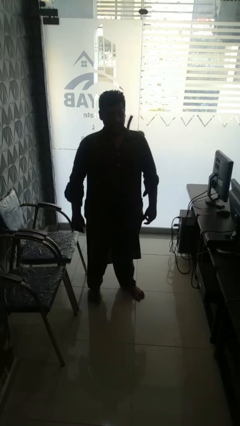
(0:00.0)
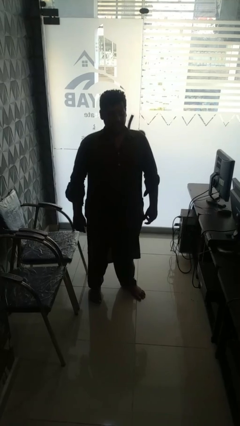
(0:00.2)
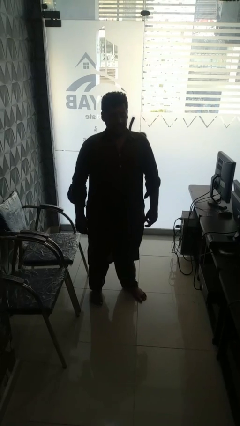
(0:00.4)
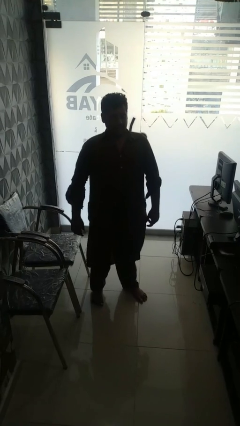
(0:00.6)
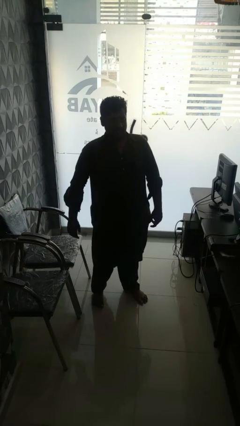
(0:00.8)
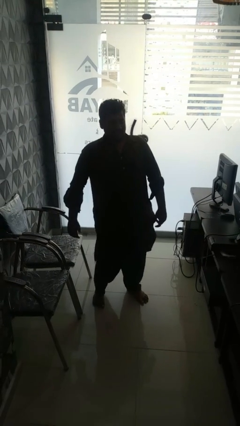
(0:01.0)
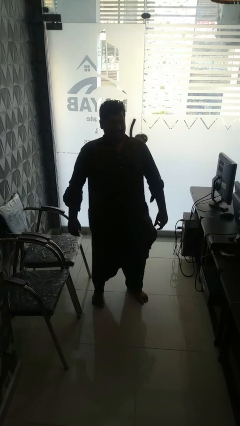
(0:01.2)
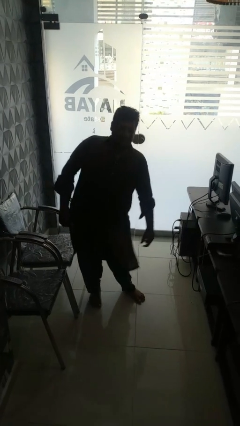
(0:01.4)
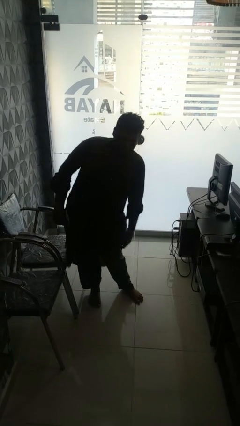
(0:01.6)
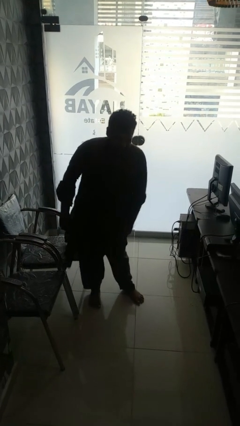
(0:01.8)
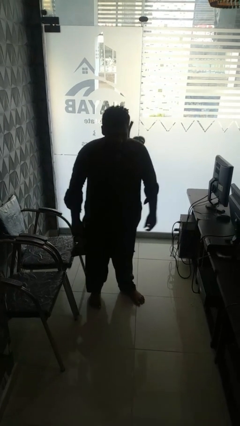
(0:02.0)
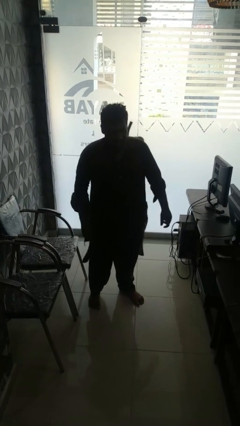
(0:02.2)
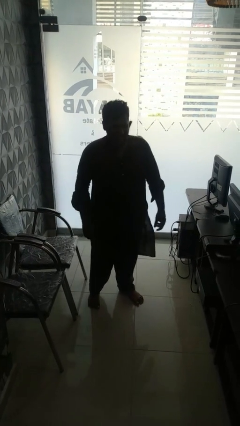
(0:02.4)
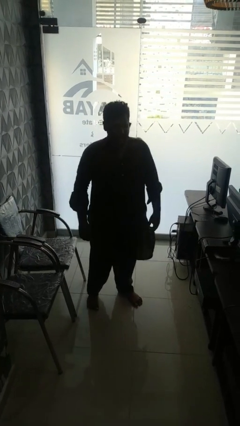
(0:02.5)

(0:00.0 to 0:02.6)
person wiggles hips

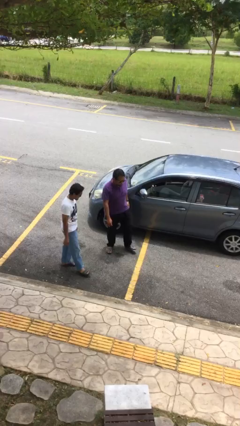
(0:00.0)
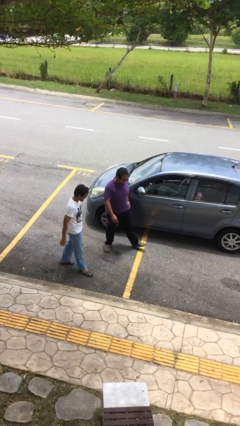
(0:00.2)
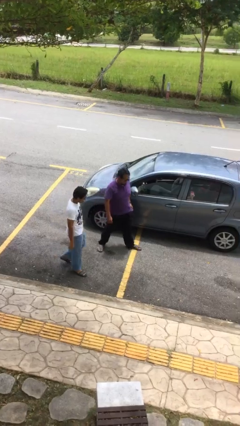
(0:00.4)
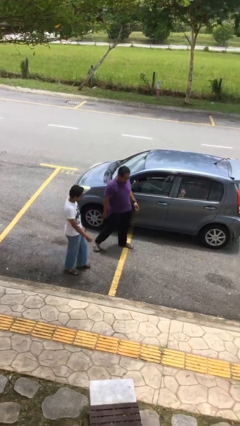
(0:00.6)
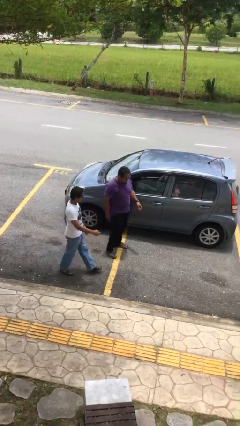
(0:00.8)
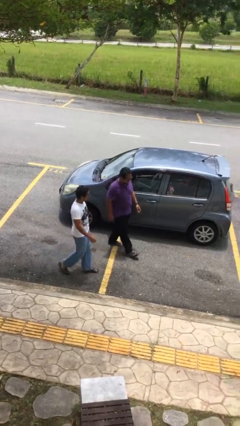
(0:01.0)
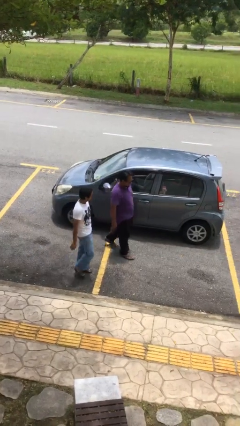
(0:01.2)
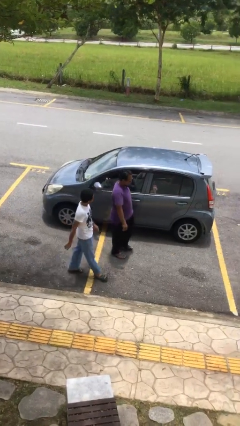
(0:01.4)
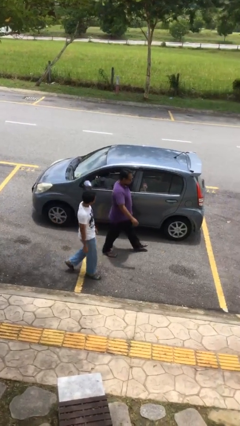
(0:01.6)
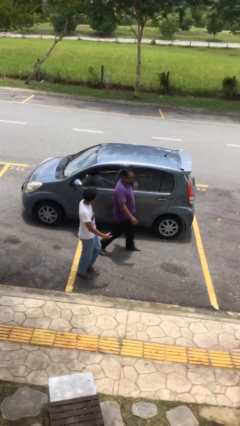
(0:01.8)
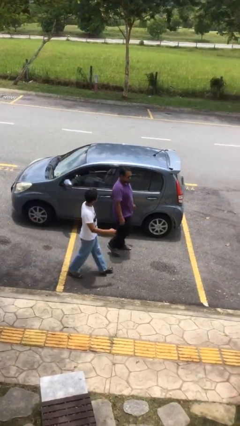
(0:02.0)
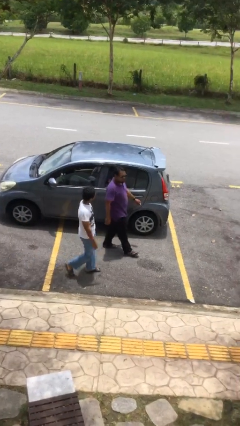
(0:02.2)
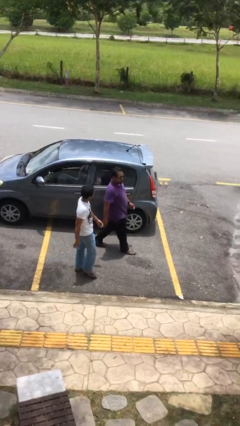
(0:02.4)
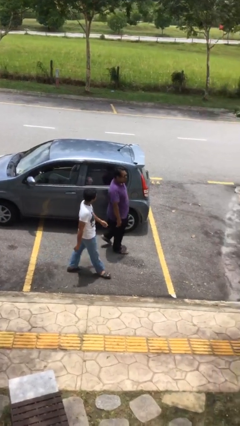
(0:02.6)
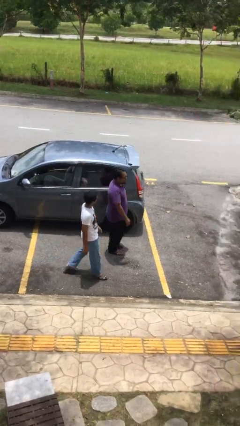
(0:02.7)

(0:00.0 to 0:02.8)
person talks to person

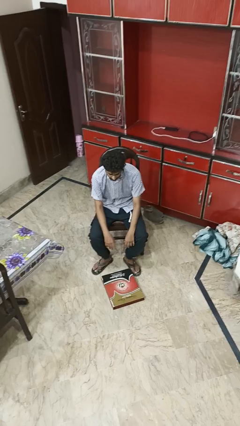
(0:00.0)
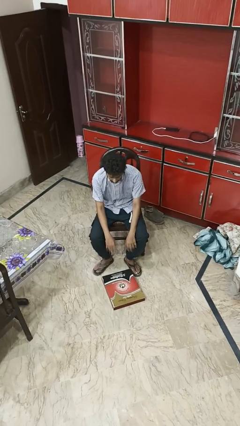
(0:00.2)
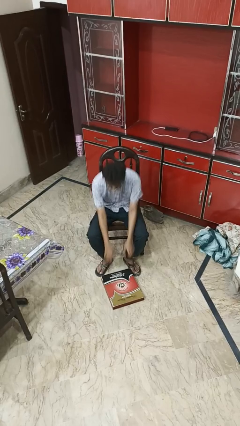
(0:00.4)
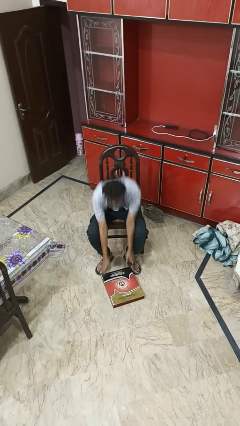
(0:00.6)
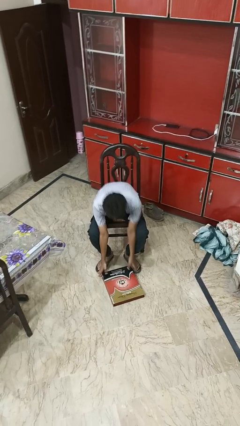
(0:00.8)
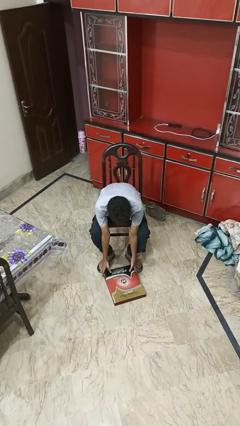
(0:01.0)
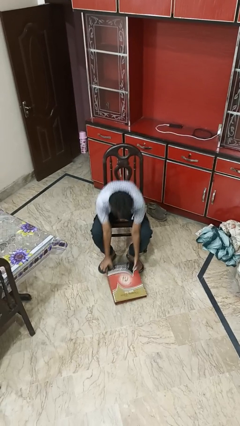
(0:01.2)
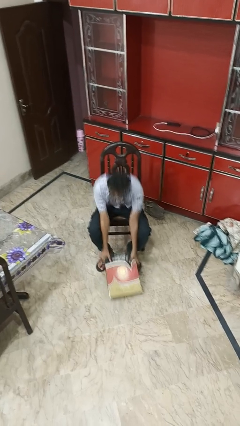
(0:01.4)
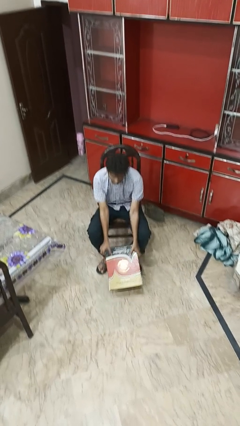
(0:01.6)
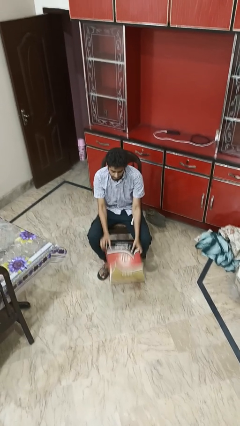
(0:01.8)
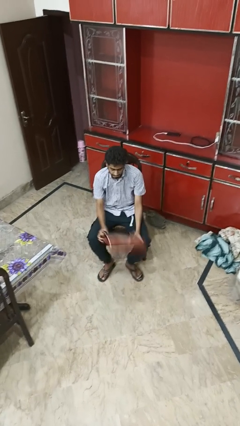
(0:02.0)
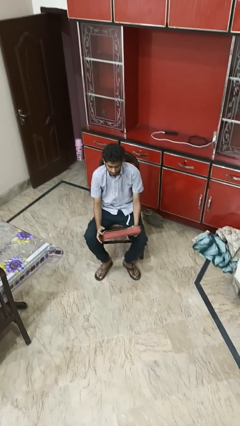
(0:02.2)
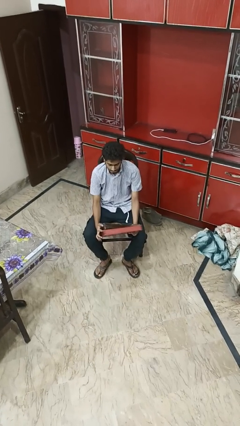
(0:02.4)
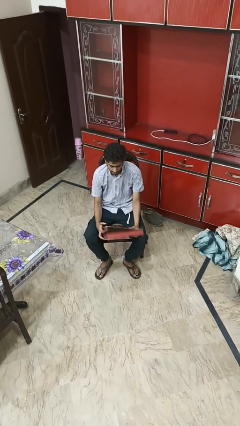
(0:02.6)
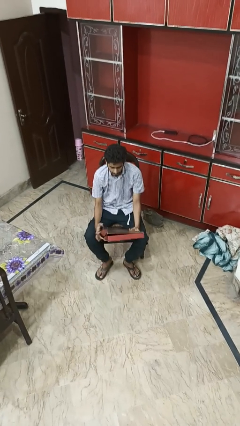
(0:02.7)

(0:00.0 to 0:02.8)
person picks up object from floor

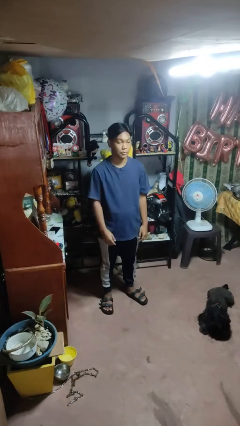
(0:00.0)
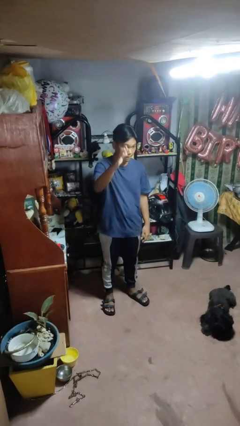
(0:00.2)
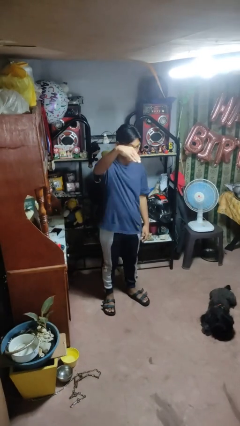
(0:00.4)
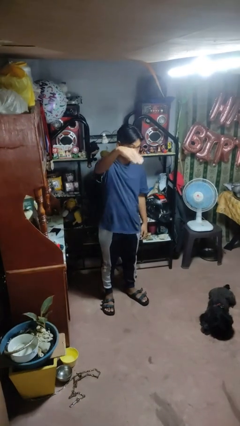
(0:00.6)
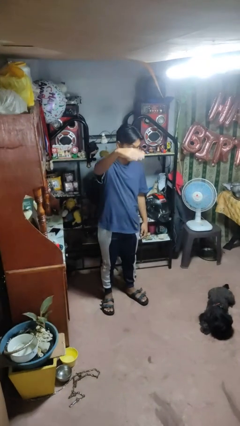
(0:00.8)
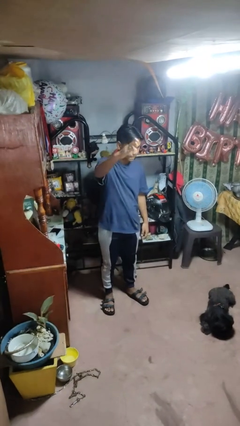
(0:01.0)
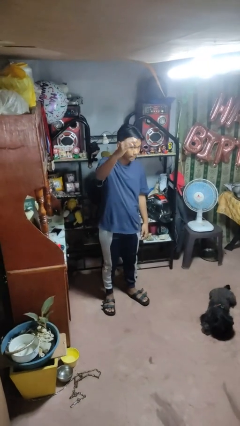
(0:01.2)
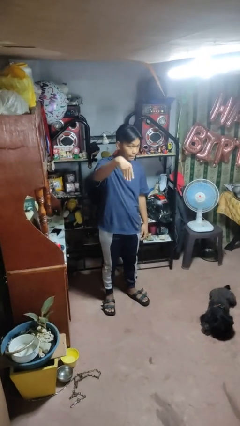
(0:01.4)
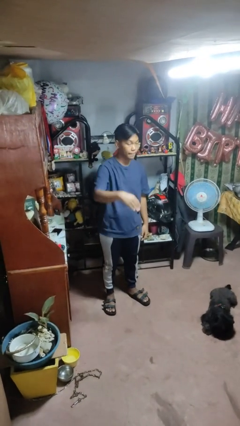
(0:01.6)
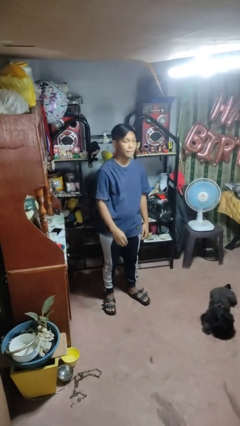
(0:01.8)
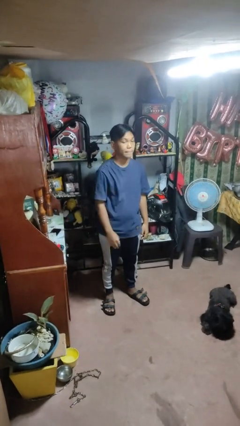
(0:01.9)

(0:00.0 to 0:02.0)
person gestures come here

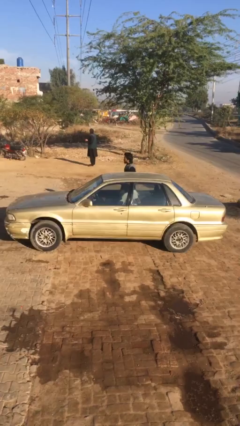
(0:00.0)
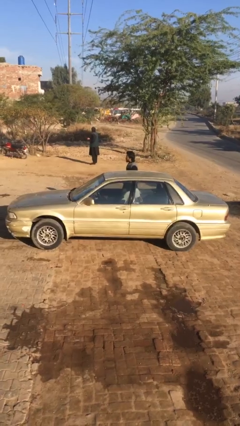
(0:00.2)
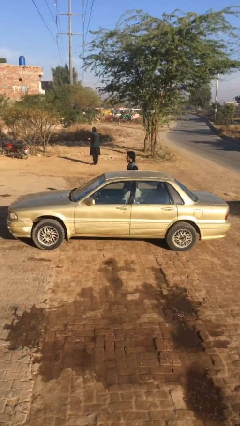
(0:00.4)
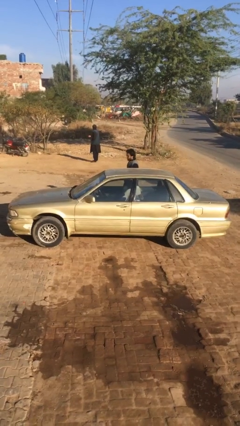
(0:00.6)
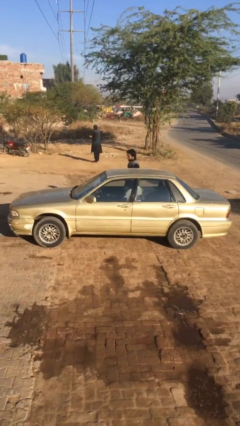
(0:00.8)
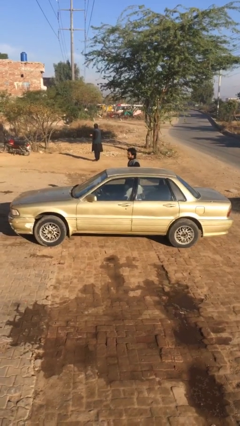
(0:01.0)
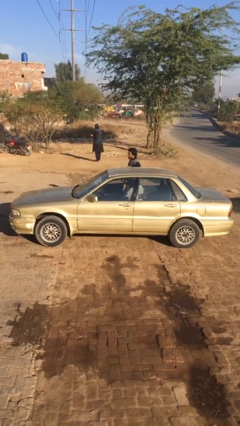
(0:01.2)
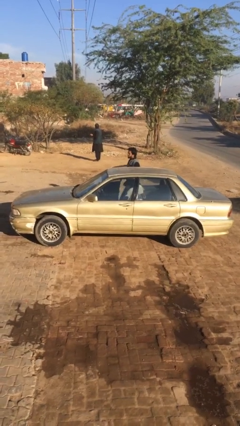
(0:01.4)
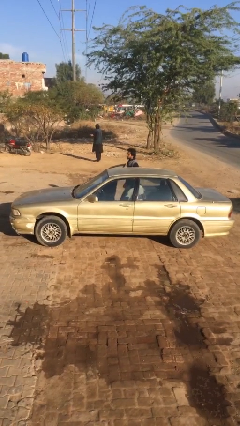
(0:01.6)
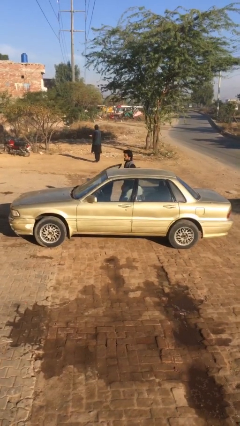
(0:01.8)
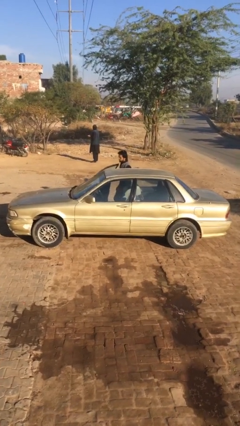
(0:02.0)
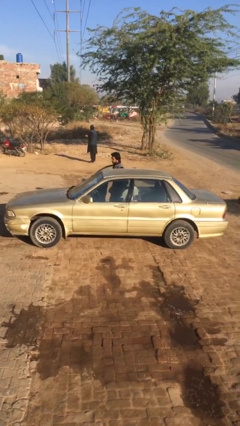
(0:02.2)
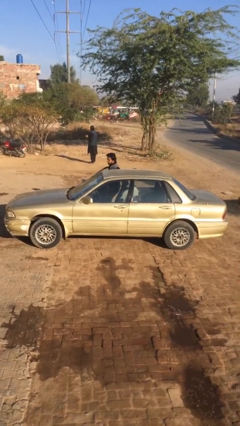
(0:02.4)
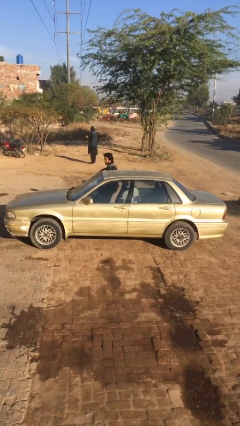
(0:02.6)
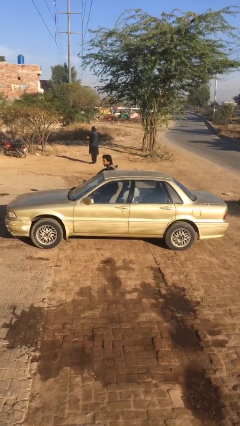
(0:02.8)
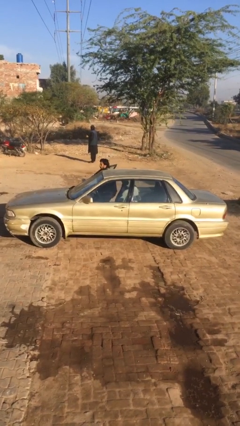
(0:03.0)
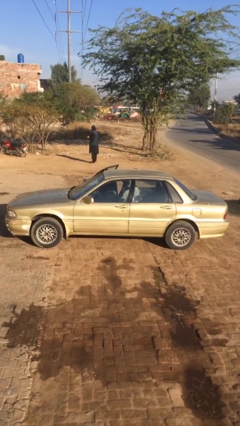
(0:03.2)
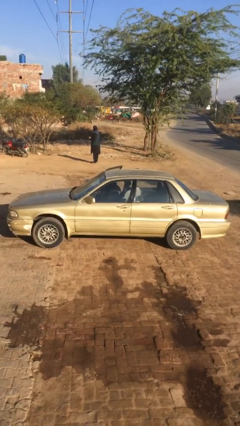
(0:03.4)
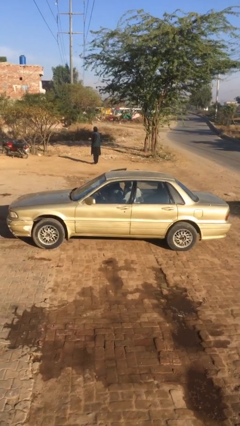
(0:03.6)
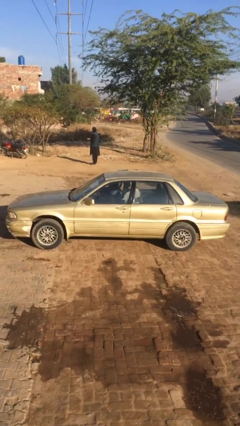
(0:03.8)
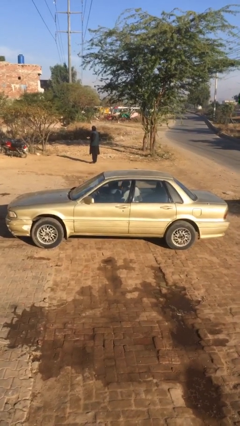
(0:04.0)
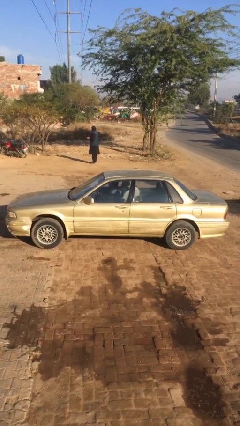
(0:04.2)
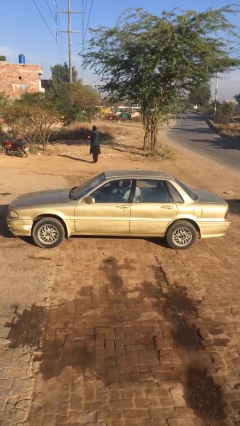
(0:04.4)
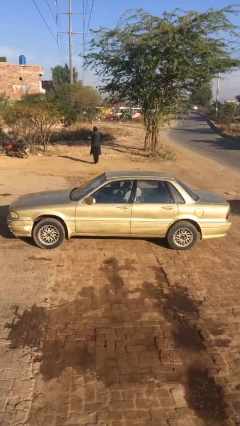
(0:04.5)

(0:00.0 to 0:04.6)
car picks up person

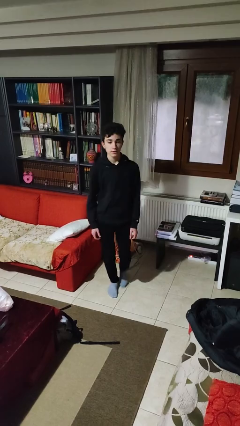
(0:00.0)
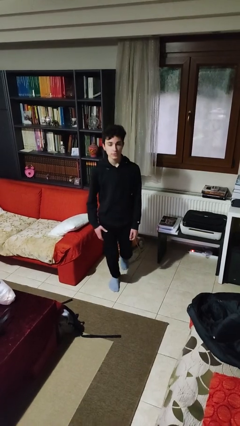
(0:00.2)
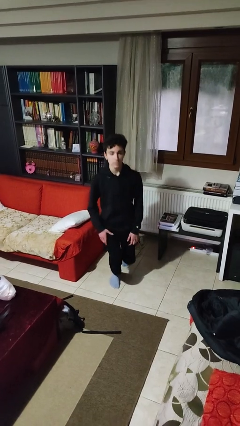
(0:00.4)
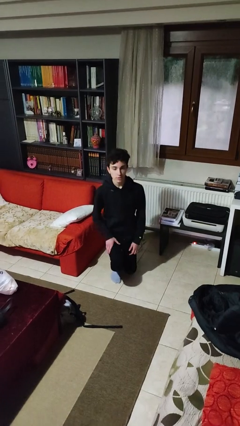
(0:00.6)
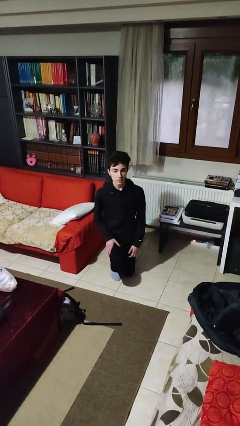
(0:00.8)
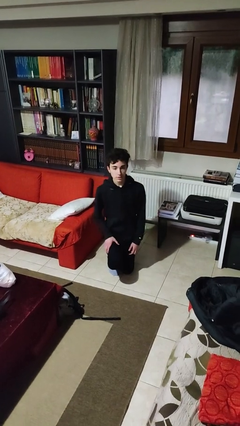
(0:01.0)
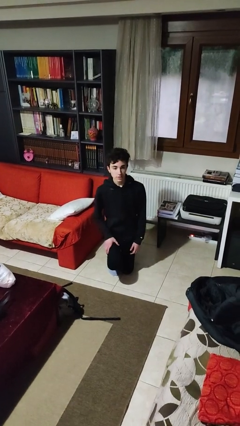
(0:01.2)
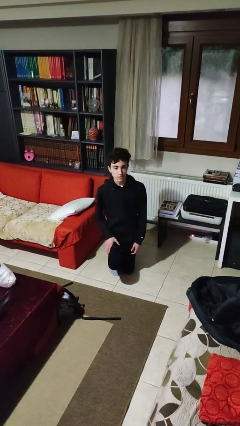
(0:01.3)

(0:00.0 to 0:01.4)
person kneels

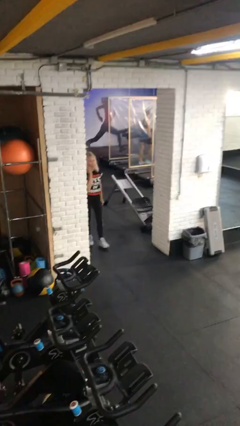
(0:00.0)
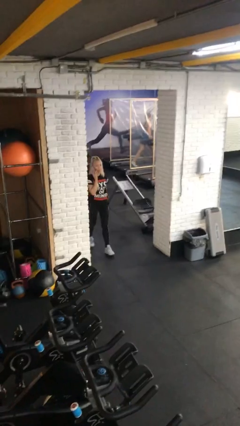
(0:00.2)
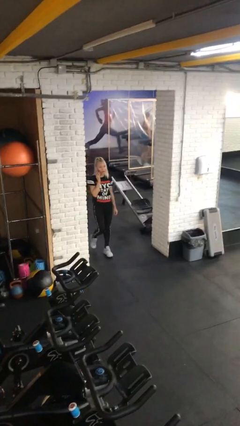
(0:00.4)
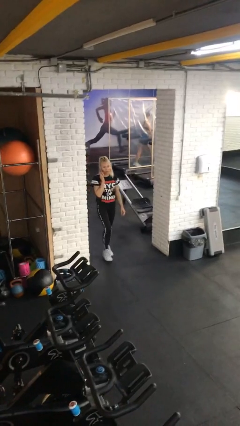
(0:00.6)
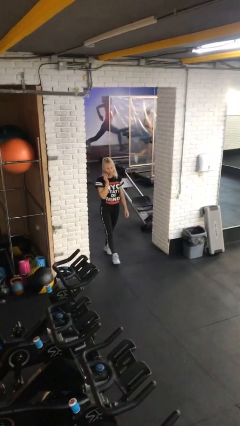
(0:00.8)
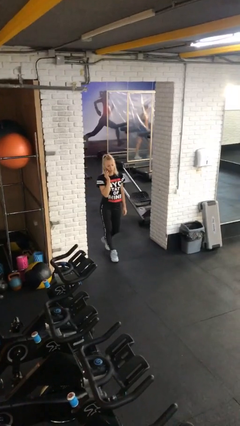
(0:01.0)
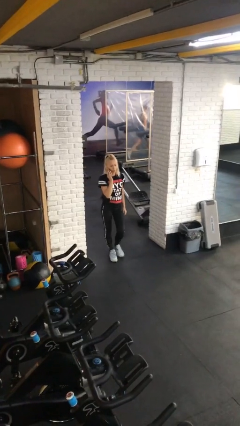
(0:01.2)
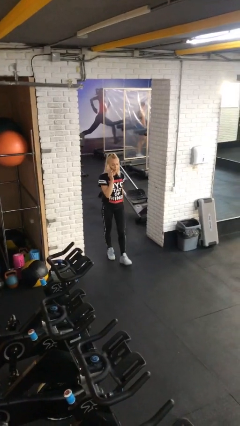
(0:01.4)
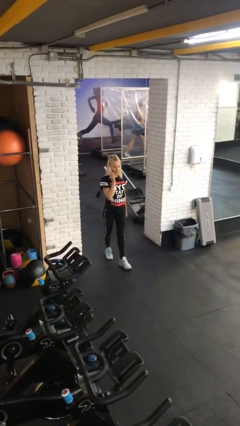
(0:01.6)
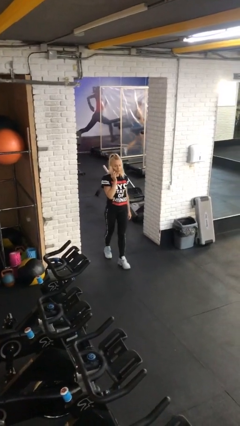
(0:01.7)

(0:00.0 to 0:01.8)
person enters scene through structure
